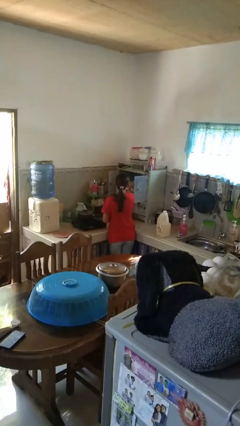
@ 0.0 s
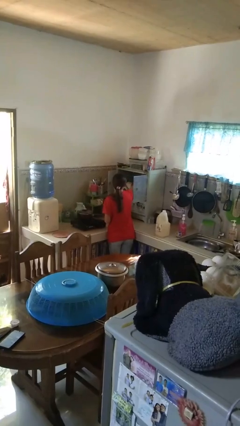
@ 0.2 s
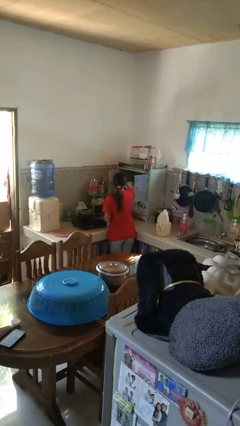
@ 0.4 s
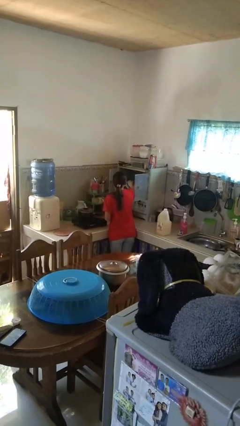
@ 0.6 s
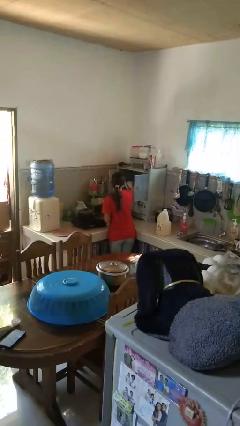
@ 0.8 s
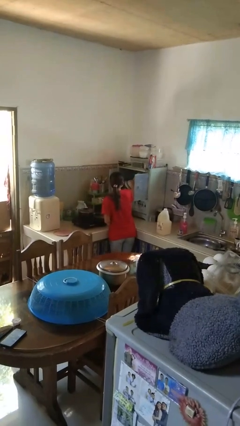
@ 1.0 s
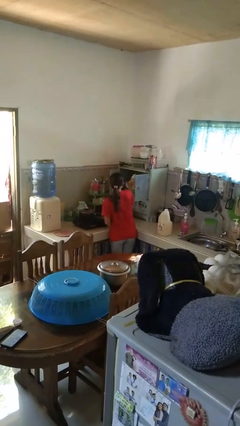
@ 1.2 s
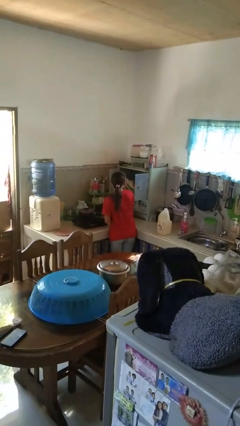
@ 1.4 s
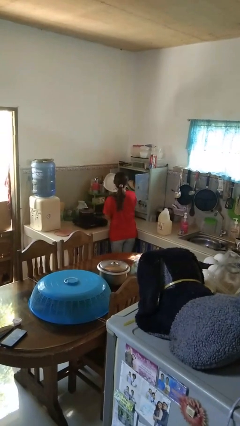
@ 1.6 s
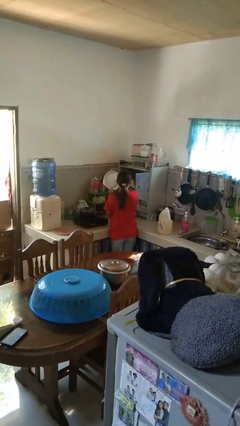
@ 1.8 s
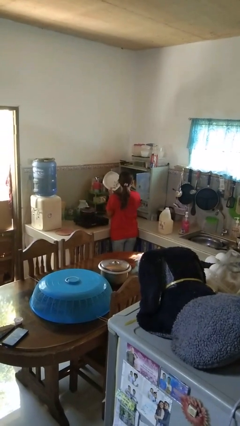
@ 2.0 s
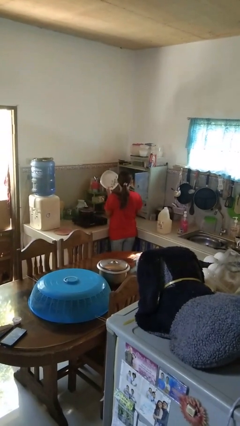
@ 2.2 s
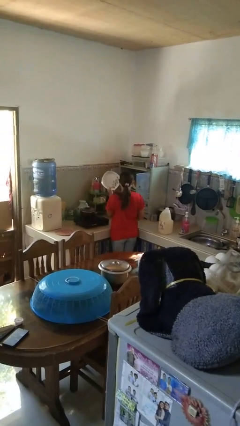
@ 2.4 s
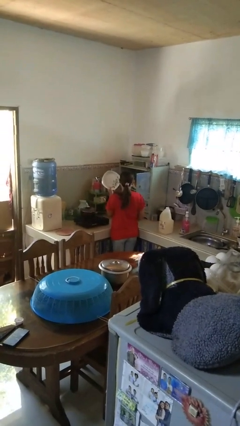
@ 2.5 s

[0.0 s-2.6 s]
person takes object from cabinet

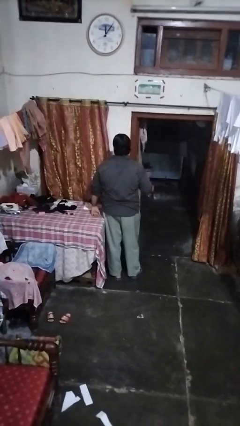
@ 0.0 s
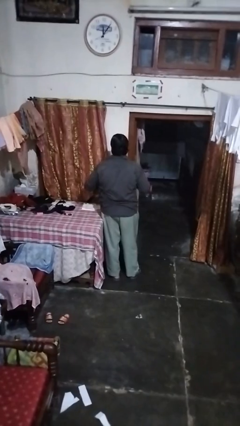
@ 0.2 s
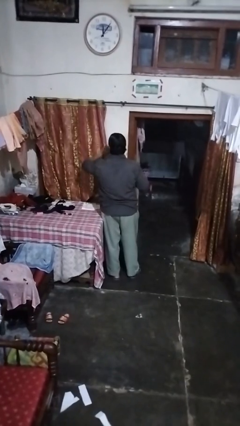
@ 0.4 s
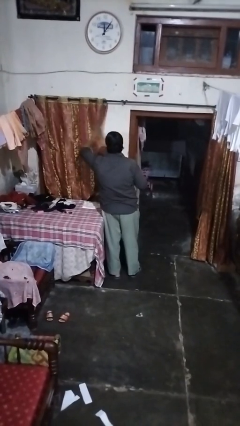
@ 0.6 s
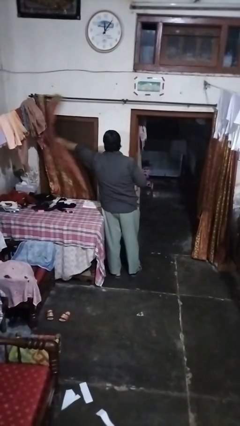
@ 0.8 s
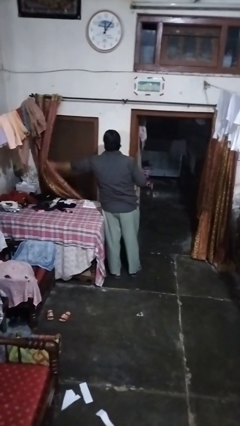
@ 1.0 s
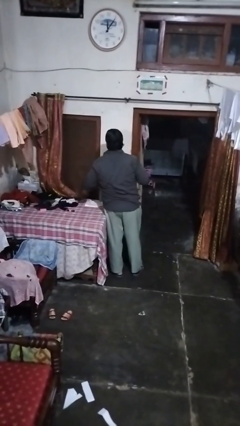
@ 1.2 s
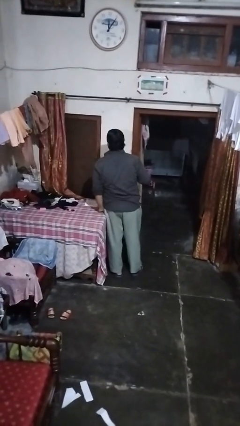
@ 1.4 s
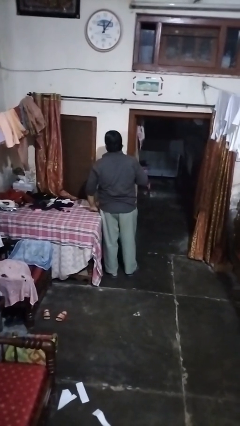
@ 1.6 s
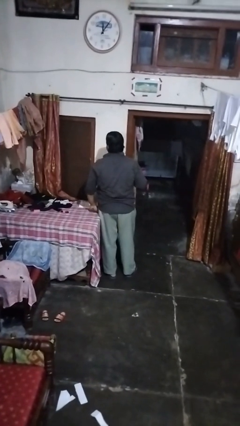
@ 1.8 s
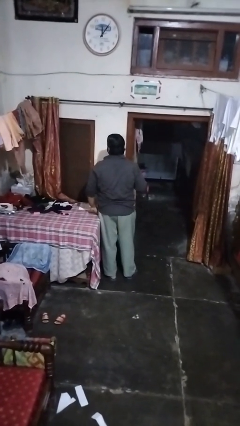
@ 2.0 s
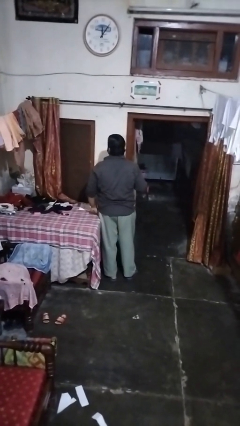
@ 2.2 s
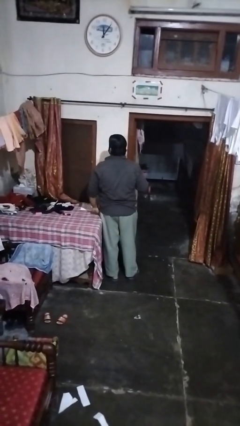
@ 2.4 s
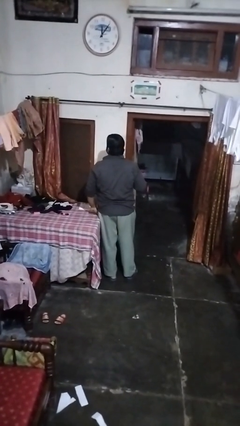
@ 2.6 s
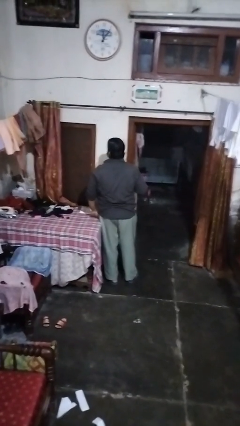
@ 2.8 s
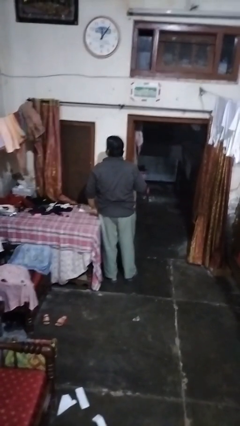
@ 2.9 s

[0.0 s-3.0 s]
person opens curtains

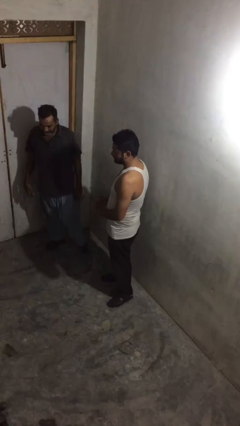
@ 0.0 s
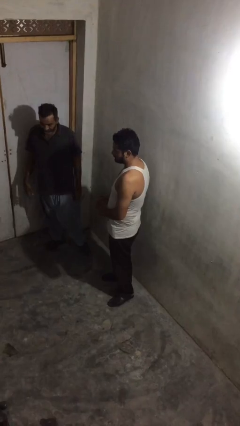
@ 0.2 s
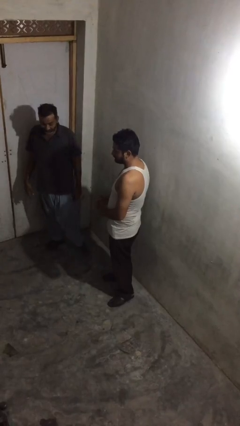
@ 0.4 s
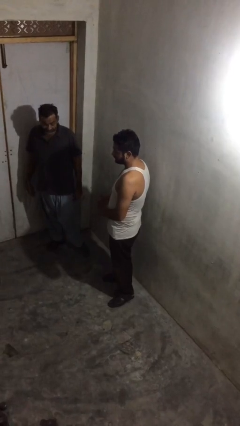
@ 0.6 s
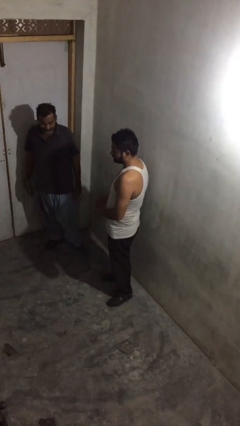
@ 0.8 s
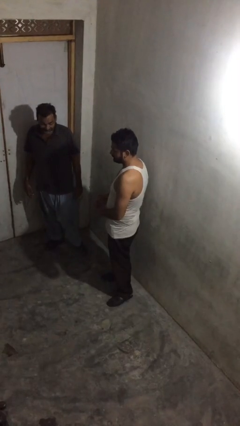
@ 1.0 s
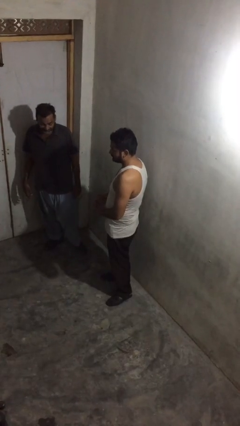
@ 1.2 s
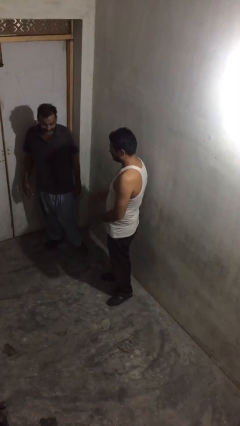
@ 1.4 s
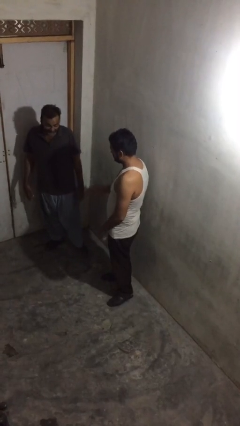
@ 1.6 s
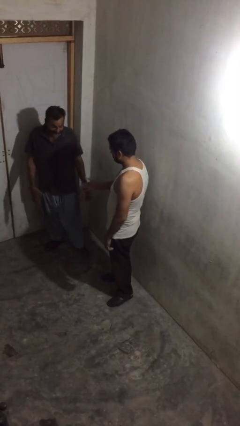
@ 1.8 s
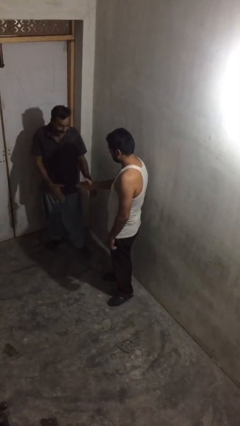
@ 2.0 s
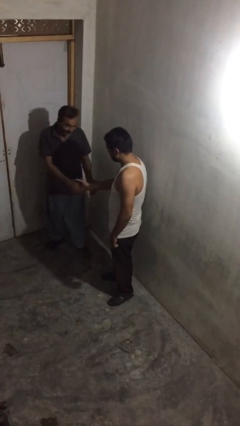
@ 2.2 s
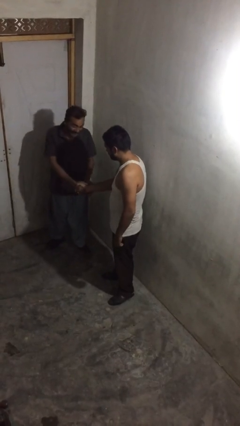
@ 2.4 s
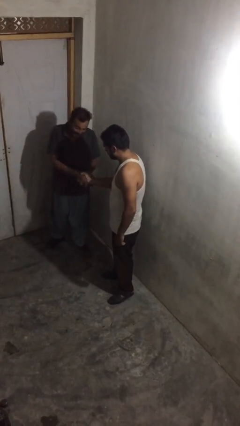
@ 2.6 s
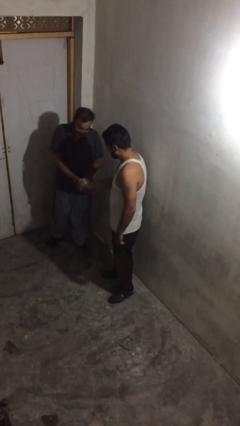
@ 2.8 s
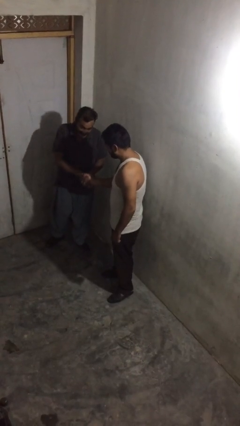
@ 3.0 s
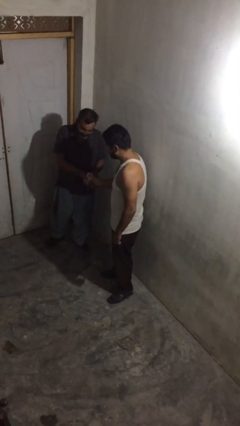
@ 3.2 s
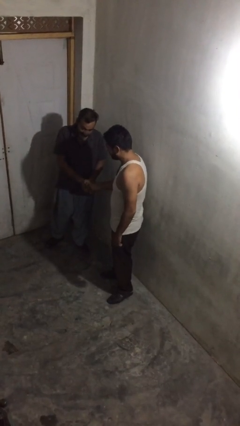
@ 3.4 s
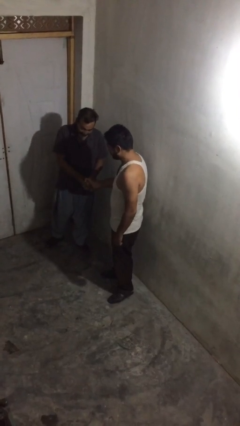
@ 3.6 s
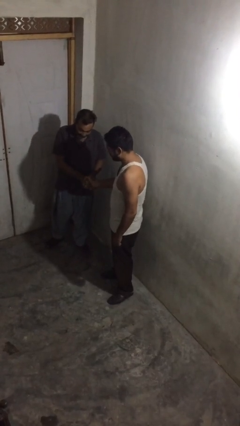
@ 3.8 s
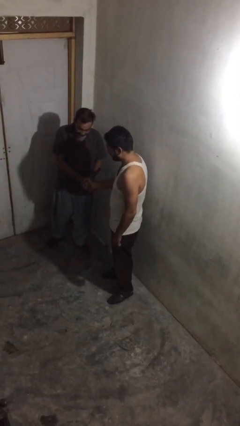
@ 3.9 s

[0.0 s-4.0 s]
person shakes hand

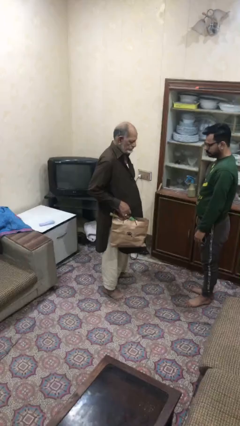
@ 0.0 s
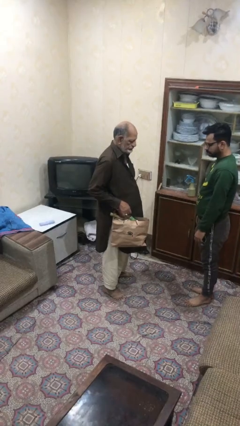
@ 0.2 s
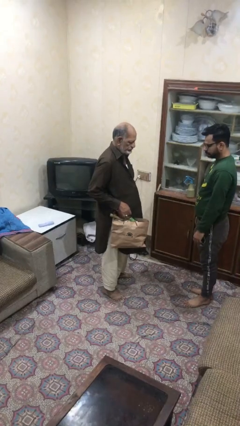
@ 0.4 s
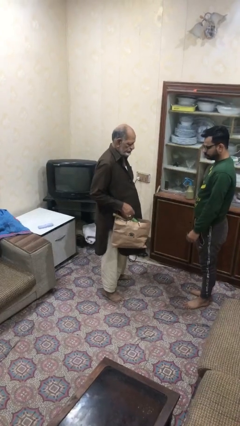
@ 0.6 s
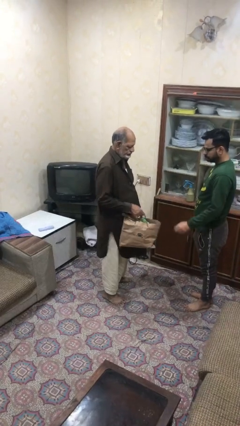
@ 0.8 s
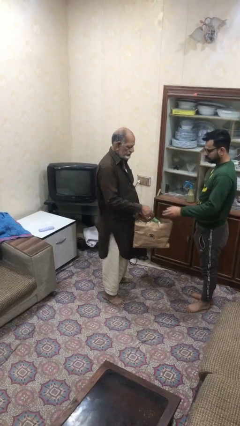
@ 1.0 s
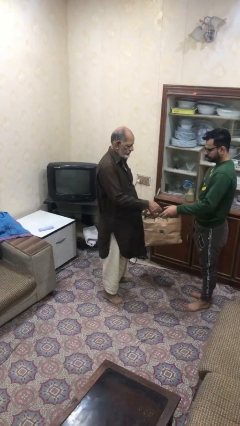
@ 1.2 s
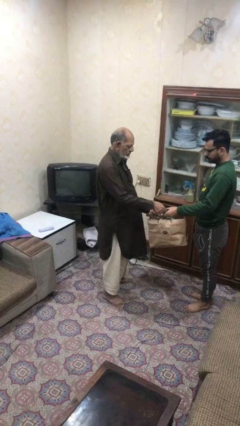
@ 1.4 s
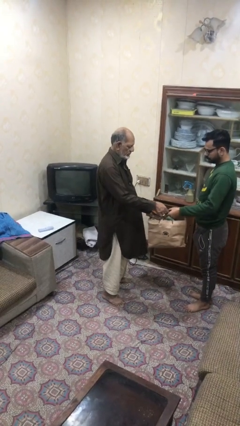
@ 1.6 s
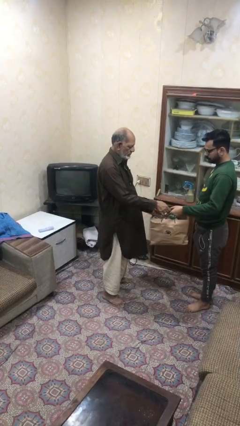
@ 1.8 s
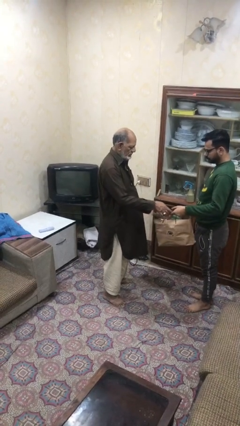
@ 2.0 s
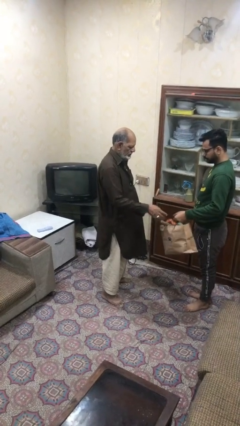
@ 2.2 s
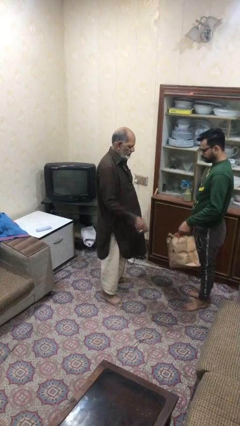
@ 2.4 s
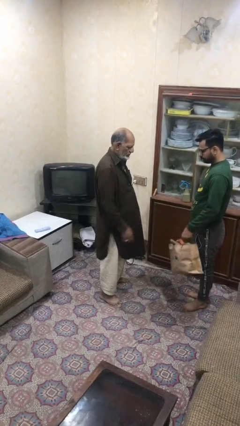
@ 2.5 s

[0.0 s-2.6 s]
person transfers object to person

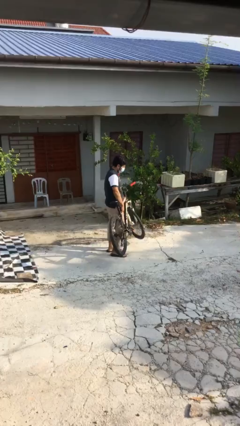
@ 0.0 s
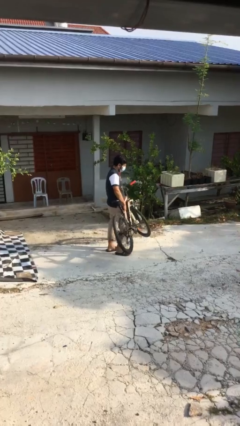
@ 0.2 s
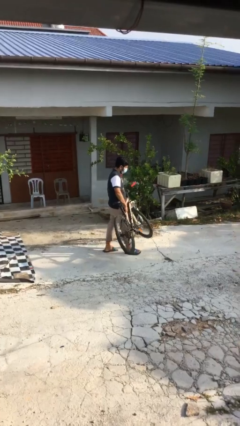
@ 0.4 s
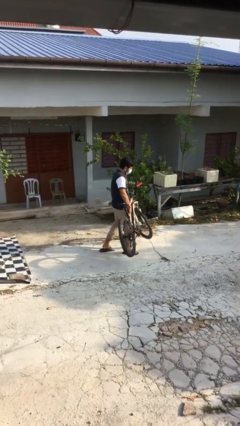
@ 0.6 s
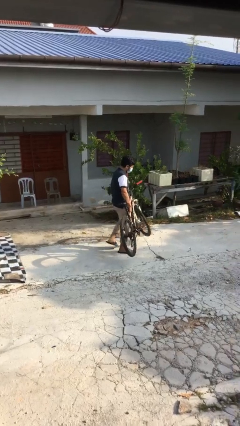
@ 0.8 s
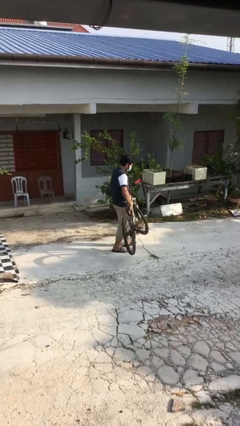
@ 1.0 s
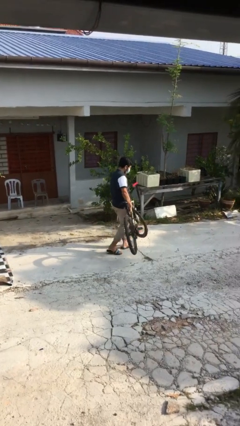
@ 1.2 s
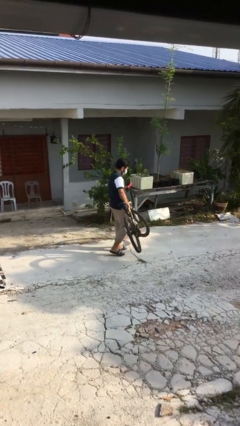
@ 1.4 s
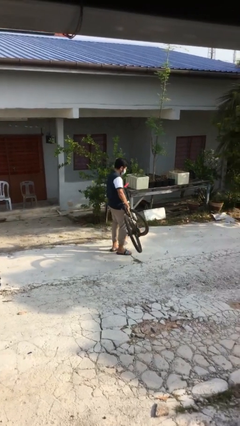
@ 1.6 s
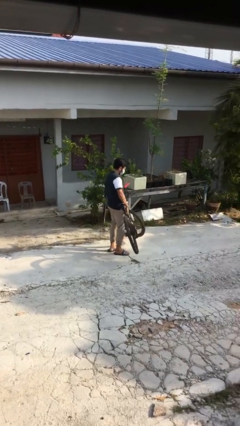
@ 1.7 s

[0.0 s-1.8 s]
person carries bicycle

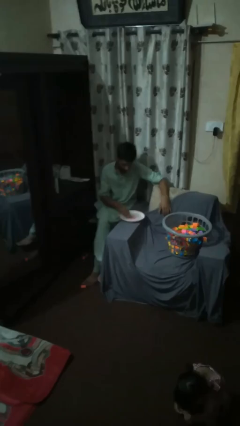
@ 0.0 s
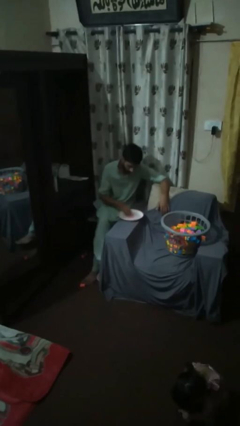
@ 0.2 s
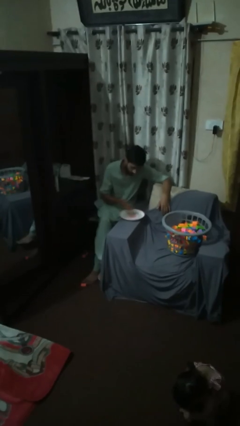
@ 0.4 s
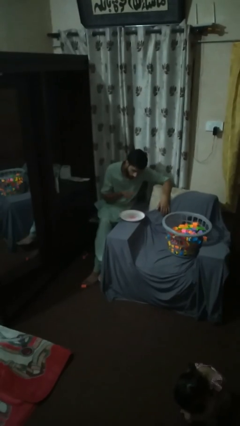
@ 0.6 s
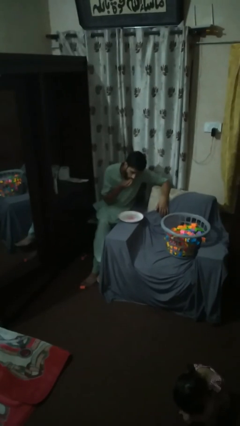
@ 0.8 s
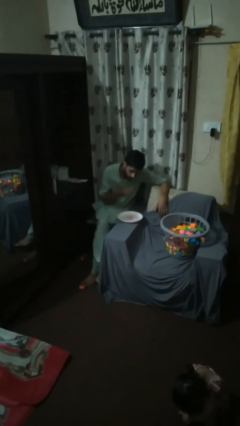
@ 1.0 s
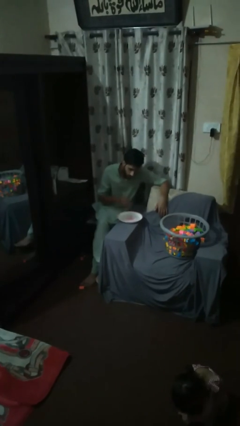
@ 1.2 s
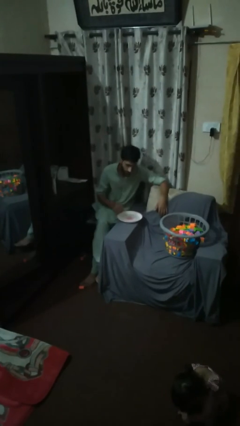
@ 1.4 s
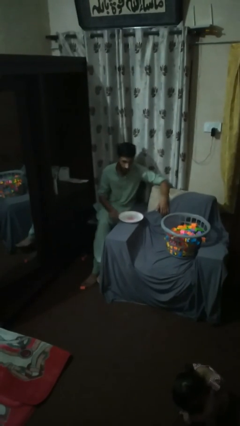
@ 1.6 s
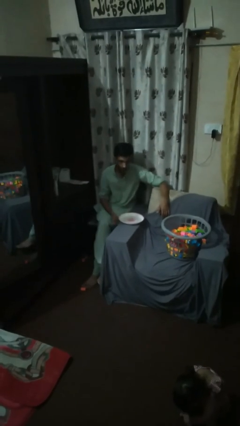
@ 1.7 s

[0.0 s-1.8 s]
person eats with hands

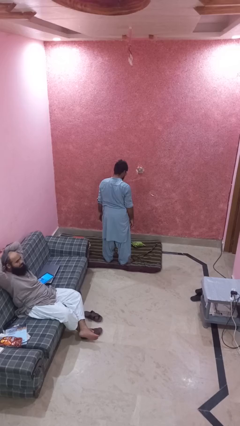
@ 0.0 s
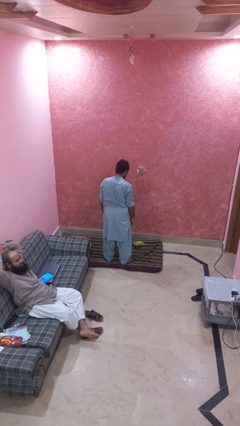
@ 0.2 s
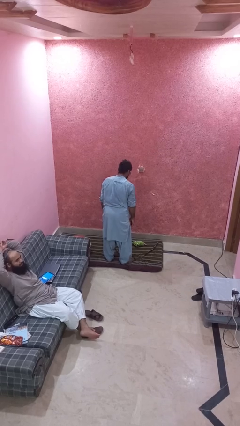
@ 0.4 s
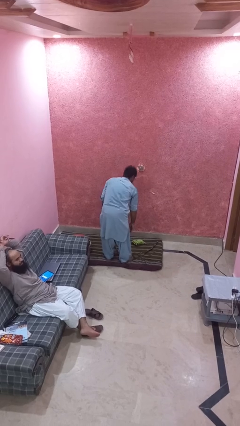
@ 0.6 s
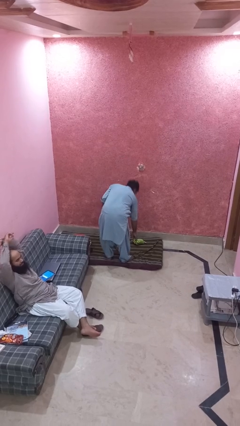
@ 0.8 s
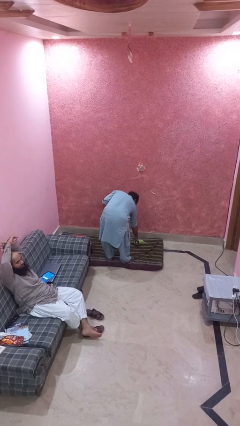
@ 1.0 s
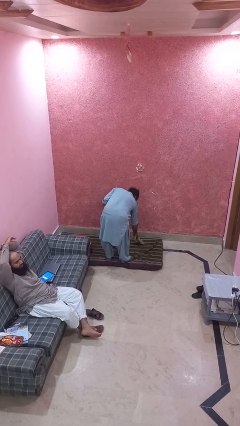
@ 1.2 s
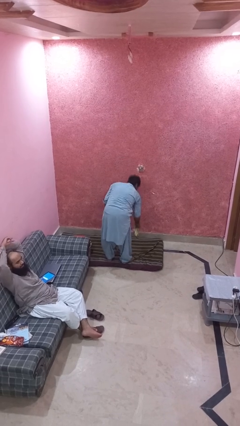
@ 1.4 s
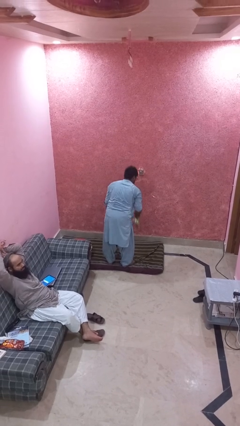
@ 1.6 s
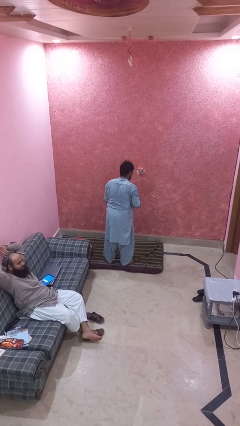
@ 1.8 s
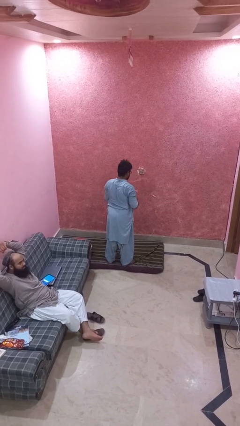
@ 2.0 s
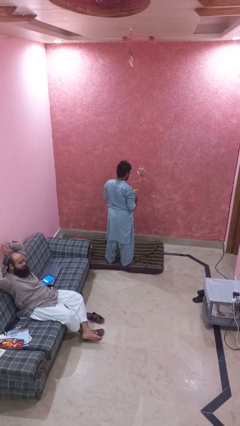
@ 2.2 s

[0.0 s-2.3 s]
person picks up object from floor
